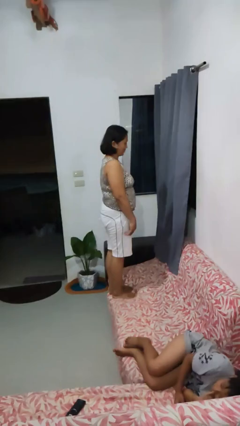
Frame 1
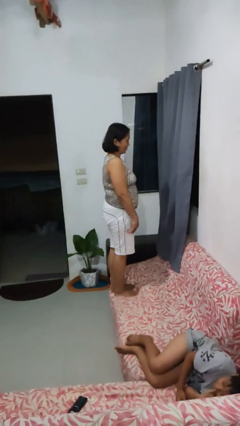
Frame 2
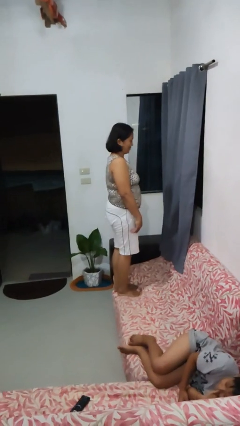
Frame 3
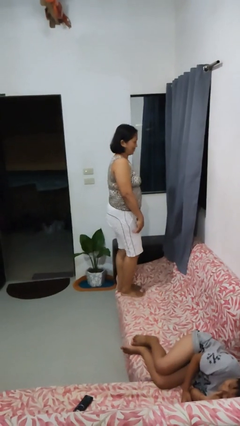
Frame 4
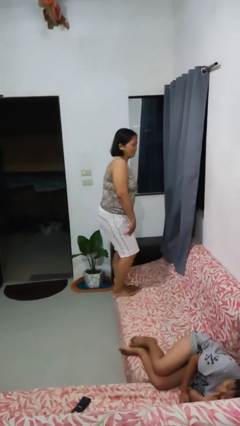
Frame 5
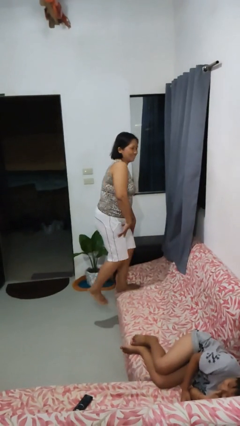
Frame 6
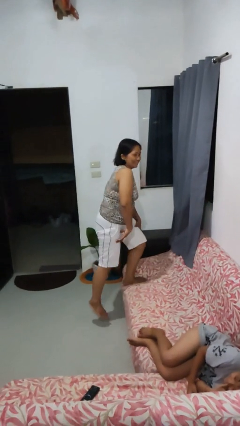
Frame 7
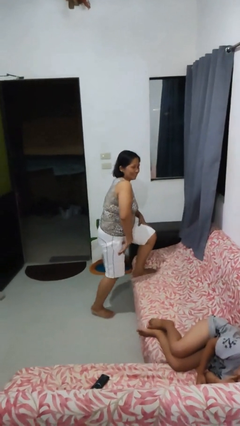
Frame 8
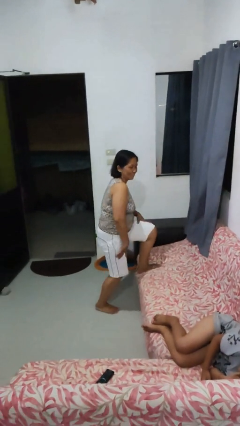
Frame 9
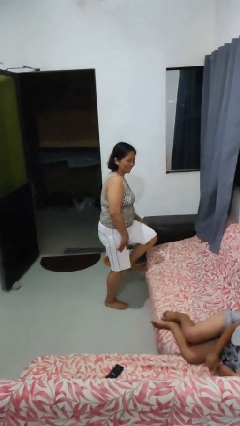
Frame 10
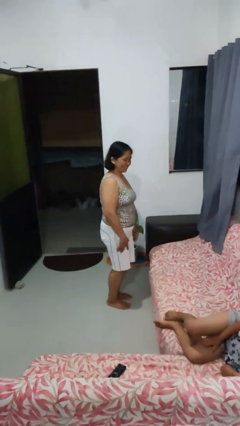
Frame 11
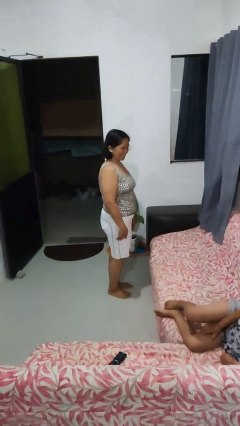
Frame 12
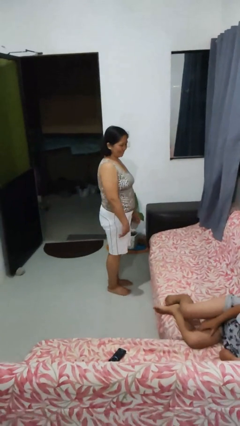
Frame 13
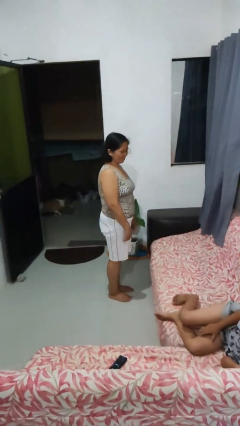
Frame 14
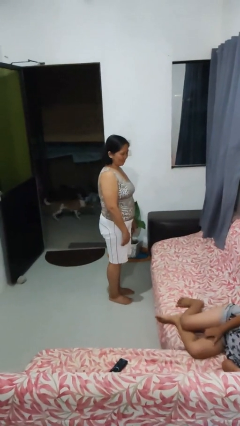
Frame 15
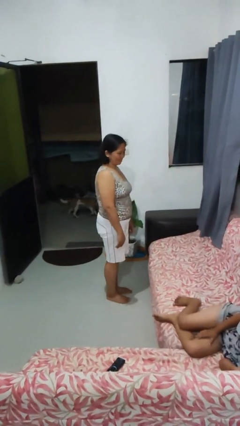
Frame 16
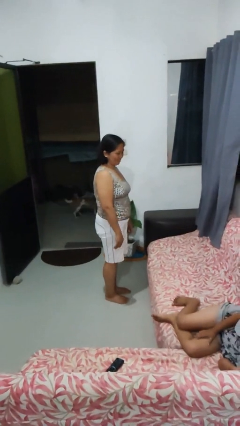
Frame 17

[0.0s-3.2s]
person climbs off couch

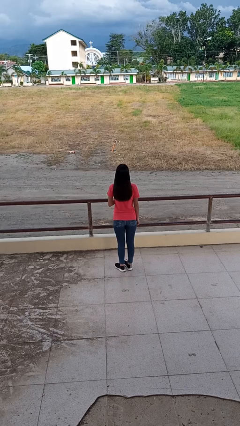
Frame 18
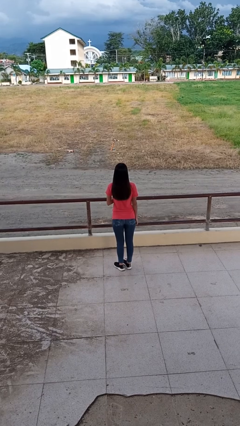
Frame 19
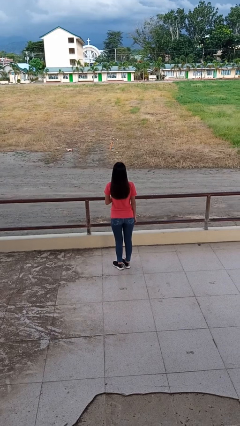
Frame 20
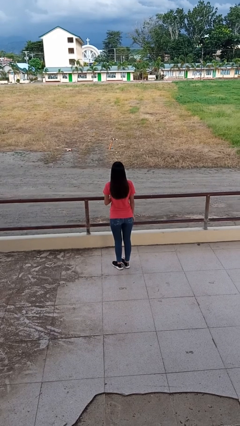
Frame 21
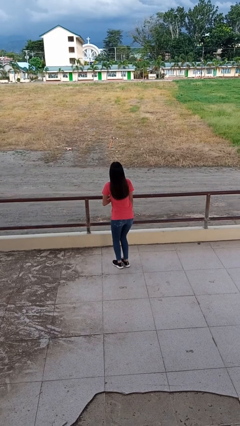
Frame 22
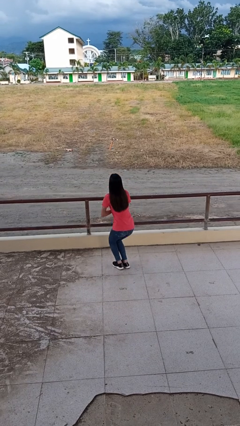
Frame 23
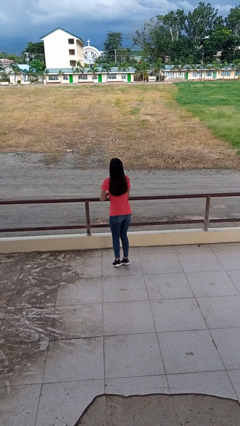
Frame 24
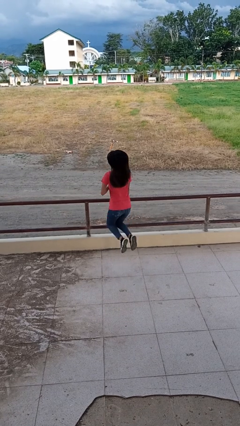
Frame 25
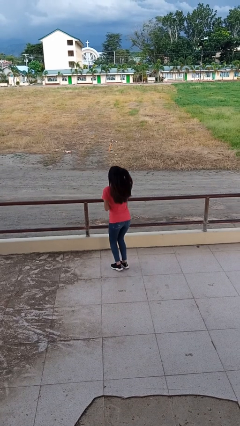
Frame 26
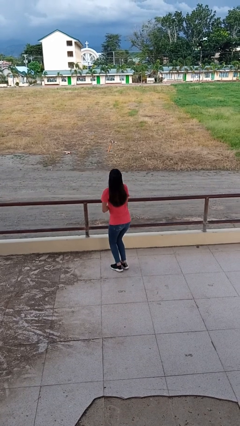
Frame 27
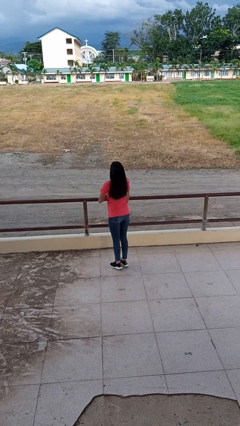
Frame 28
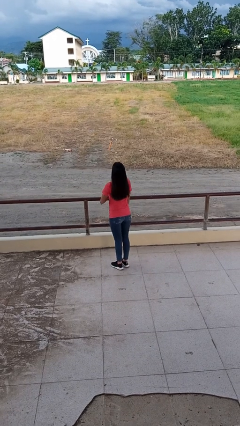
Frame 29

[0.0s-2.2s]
person jumps

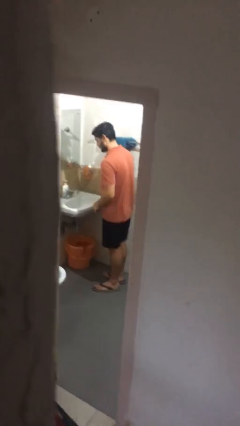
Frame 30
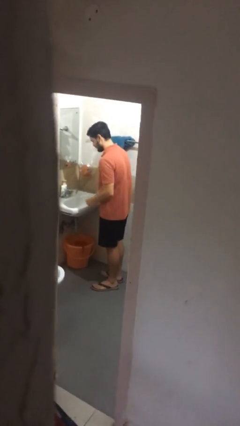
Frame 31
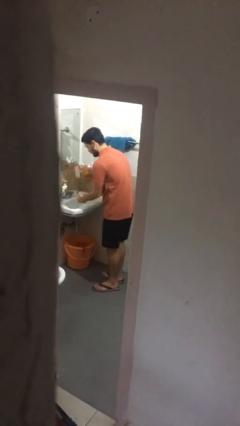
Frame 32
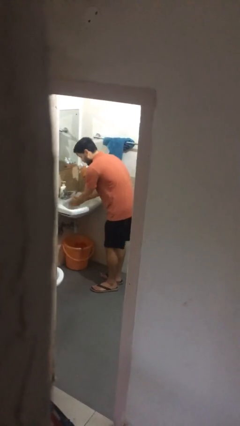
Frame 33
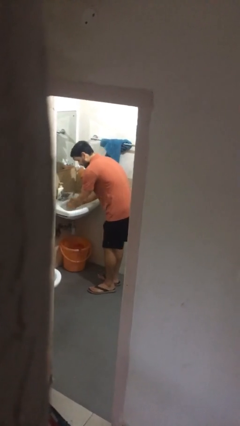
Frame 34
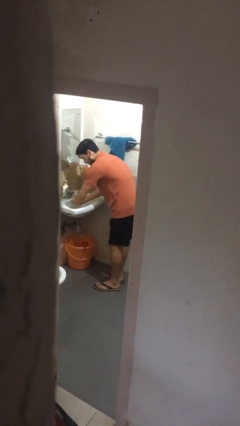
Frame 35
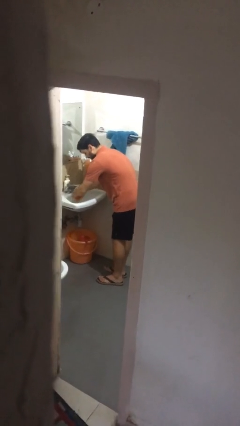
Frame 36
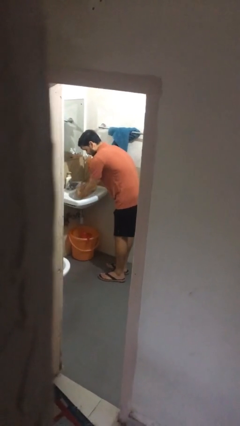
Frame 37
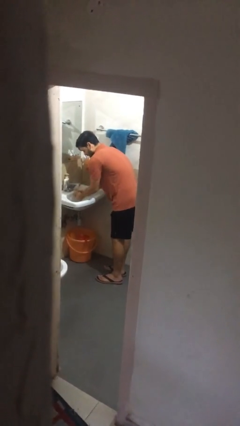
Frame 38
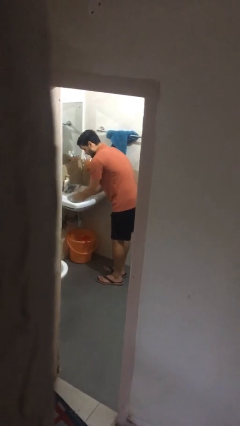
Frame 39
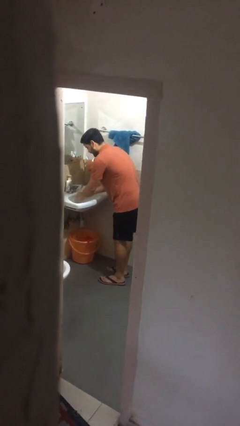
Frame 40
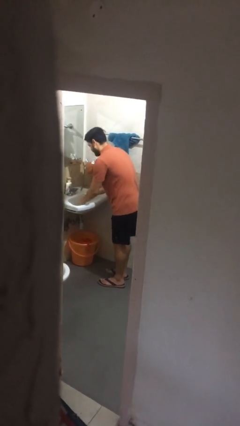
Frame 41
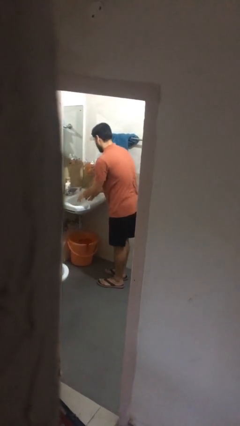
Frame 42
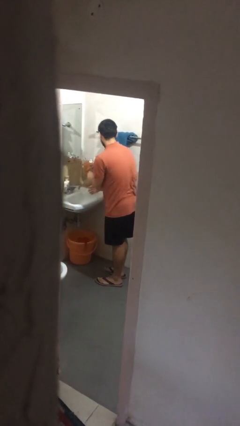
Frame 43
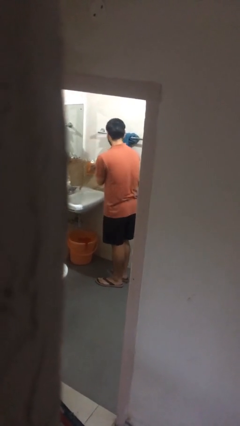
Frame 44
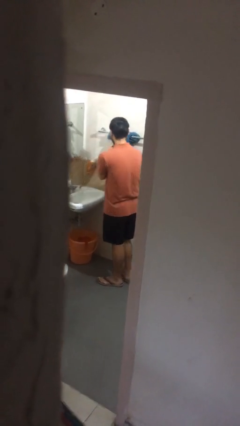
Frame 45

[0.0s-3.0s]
person washes hands

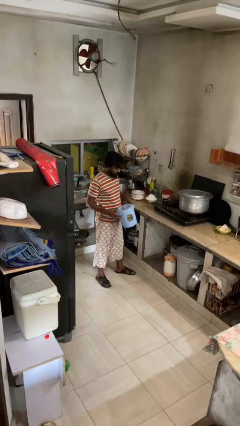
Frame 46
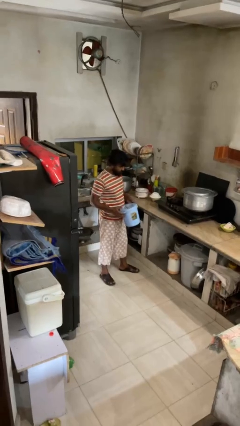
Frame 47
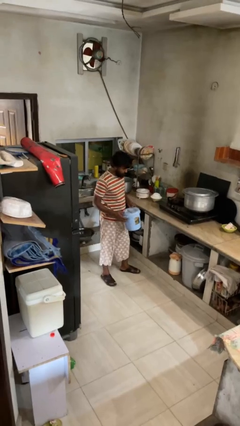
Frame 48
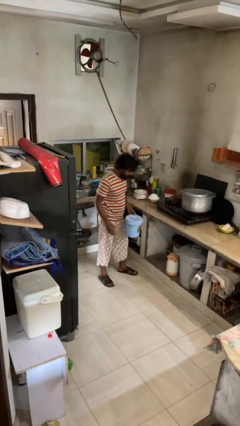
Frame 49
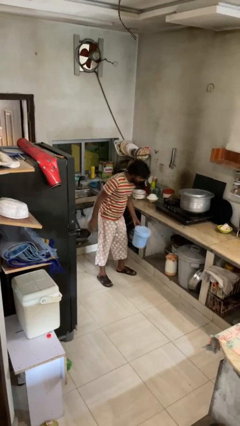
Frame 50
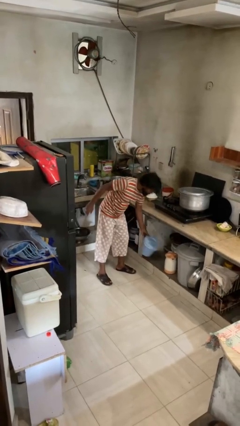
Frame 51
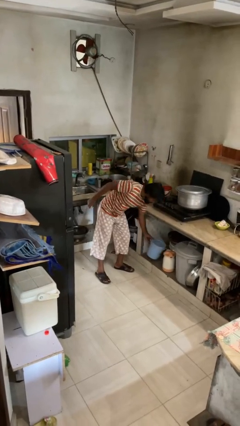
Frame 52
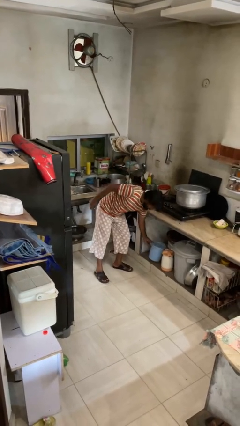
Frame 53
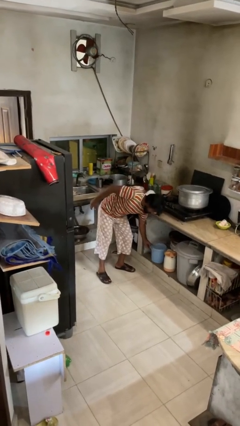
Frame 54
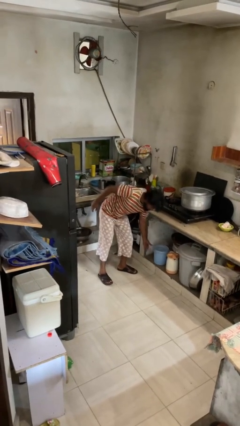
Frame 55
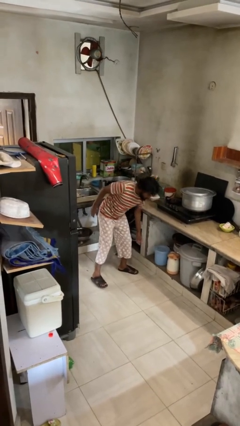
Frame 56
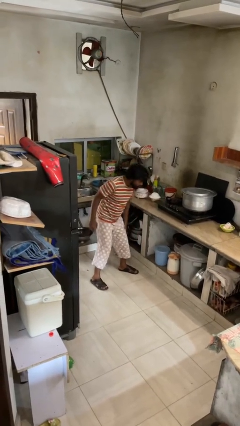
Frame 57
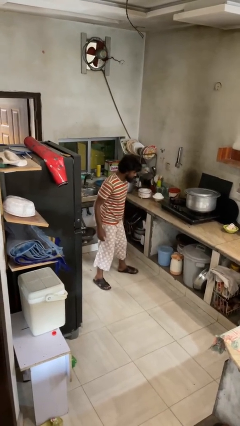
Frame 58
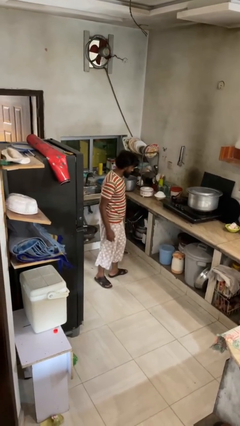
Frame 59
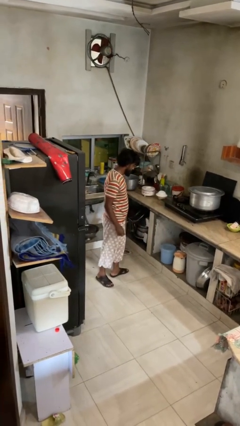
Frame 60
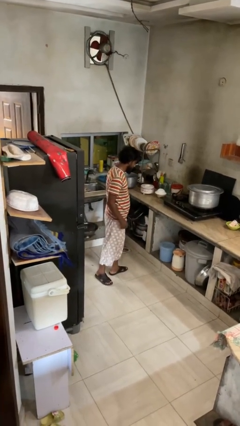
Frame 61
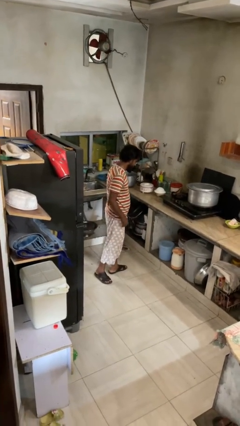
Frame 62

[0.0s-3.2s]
person puts down object into cabinet

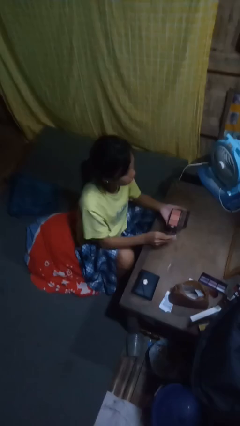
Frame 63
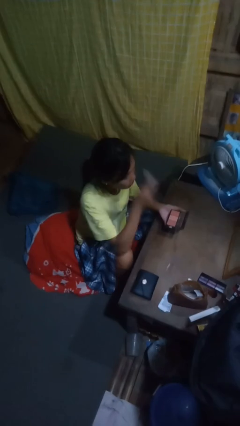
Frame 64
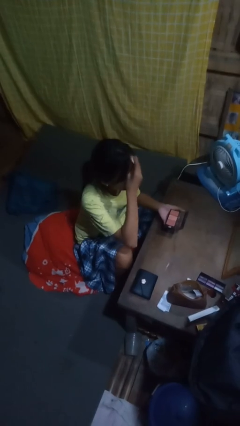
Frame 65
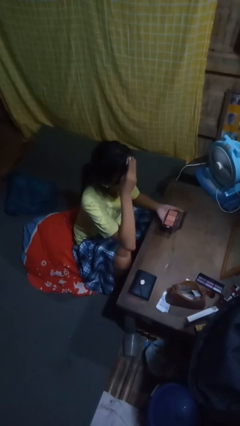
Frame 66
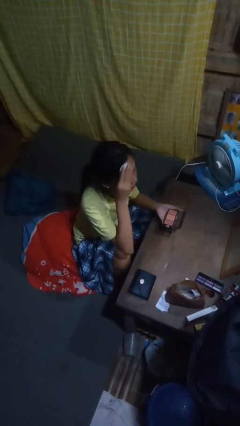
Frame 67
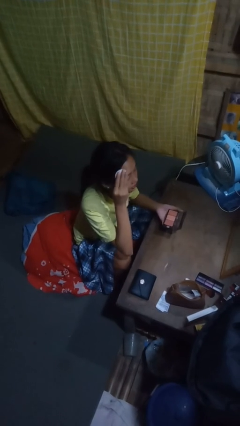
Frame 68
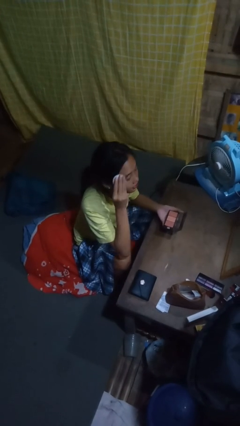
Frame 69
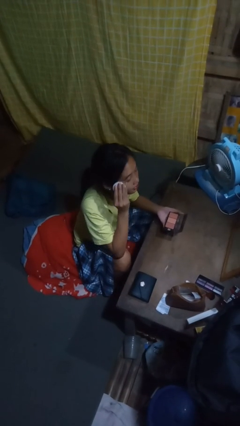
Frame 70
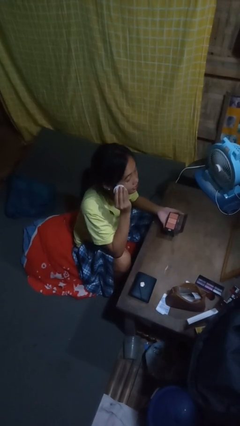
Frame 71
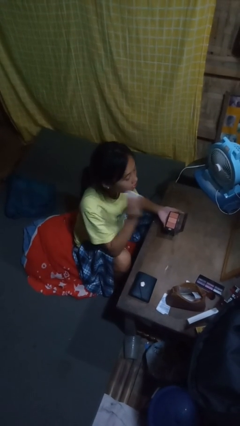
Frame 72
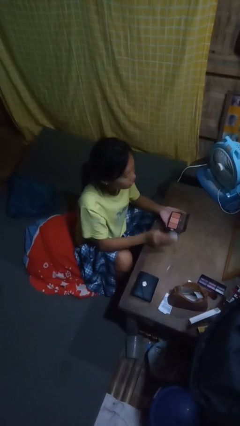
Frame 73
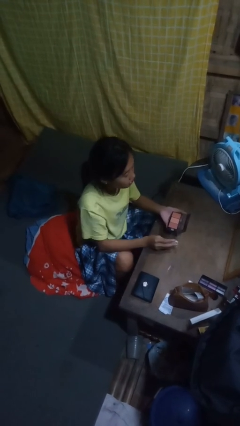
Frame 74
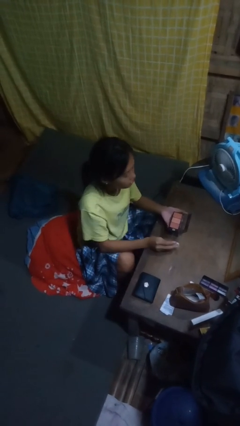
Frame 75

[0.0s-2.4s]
person applies foundation makeup

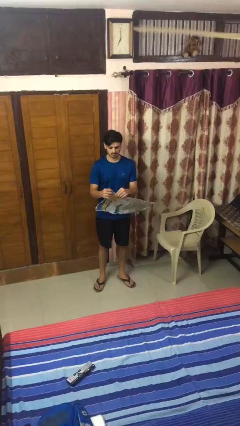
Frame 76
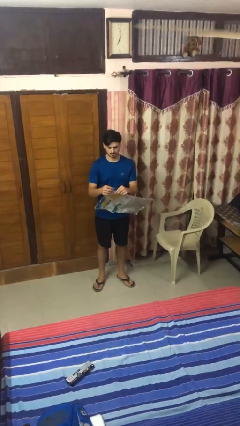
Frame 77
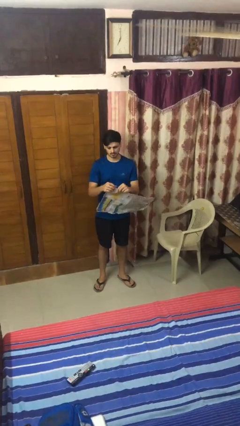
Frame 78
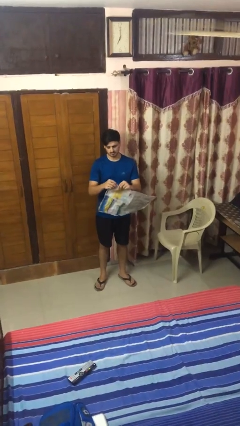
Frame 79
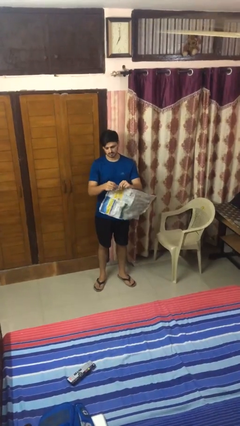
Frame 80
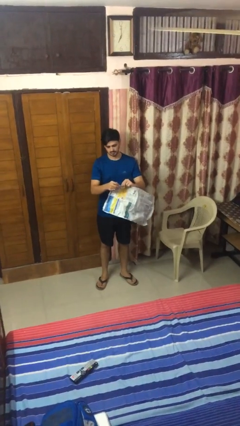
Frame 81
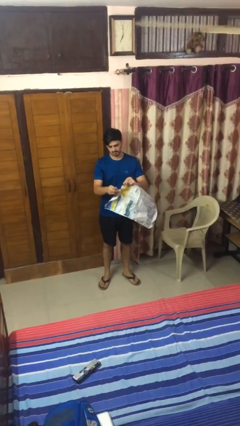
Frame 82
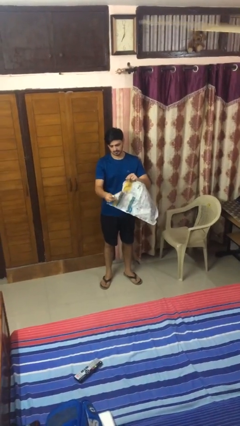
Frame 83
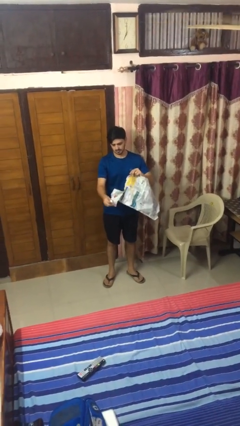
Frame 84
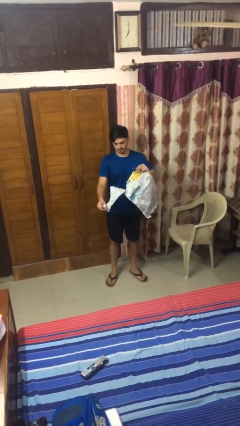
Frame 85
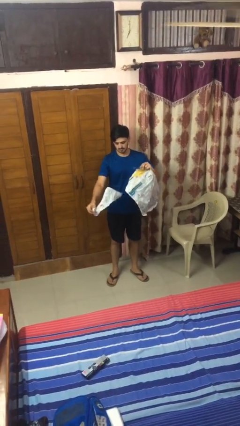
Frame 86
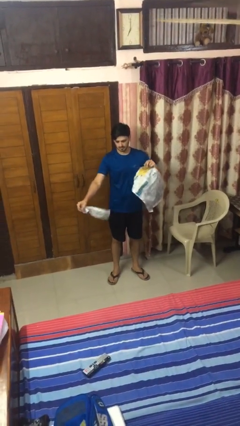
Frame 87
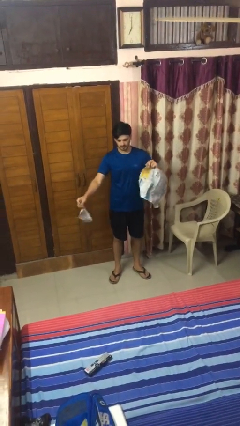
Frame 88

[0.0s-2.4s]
person tears paper

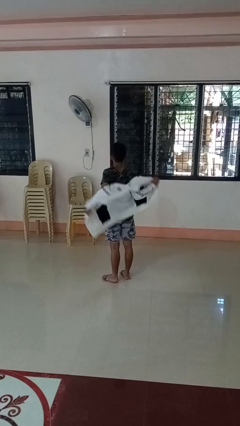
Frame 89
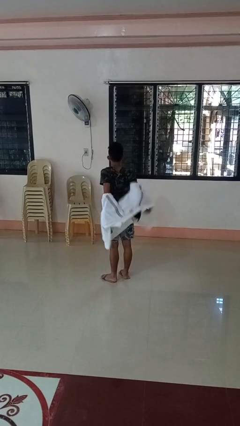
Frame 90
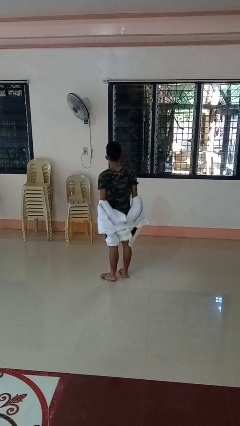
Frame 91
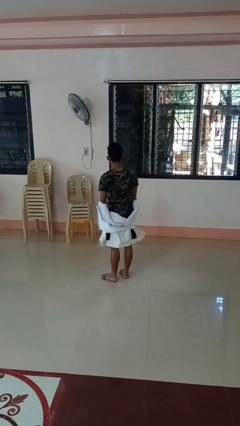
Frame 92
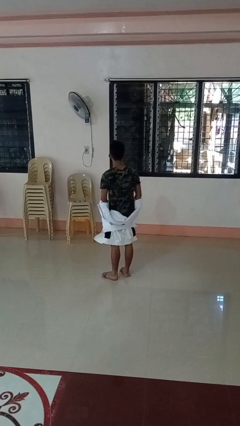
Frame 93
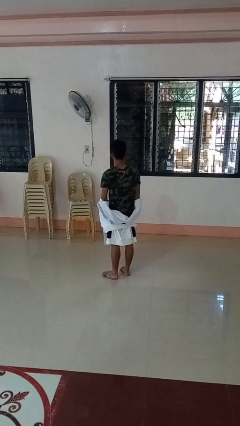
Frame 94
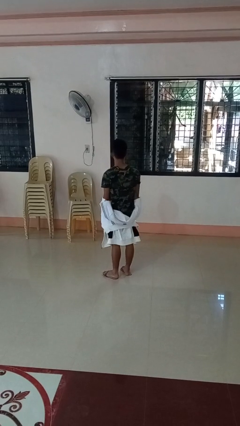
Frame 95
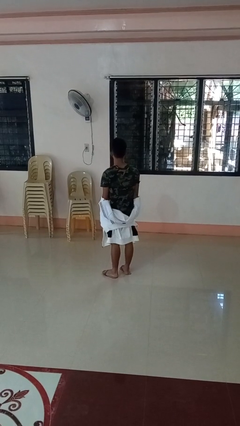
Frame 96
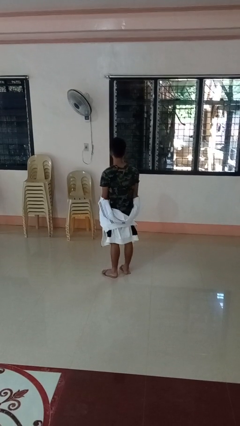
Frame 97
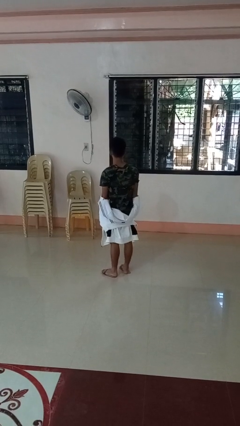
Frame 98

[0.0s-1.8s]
person takes off jacket
